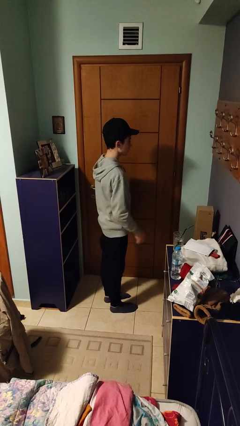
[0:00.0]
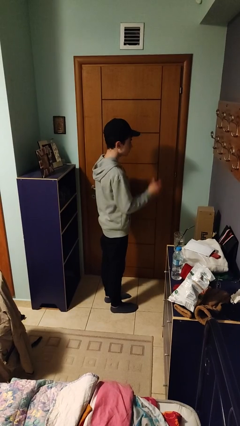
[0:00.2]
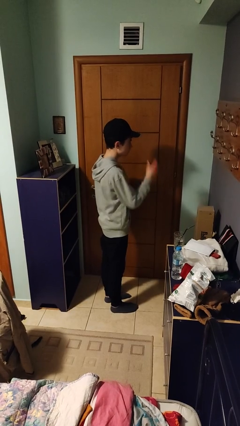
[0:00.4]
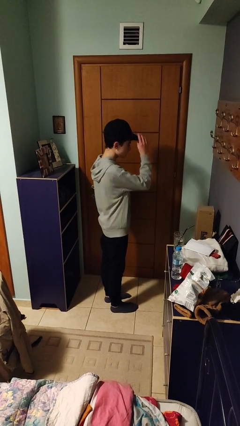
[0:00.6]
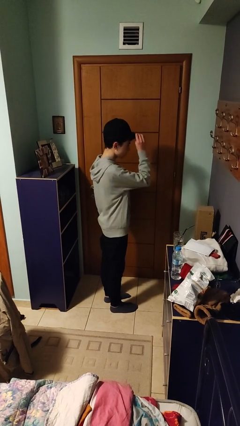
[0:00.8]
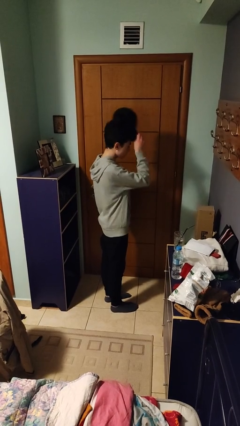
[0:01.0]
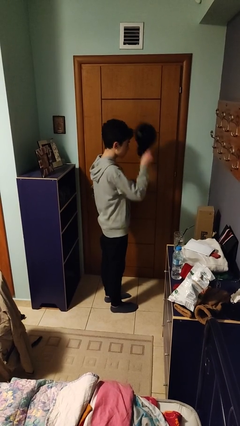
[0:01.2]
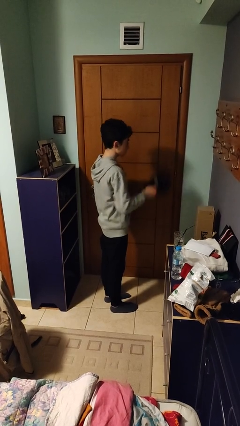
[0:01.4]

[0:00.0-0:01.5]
person takes off hat

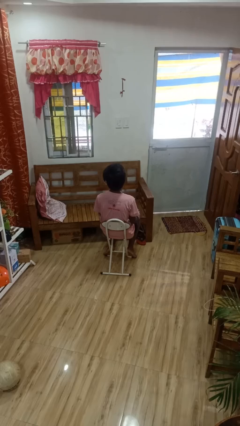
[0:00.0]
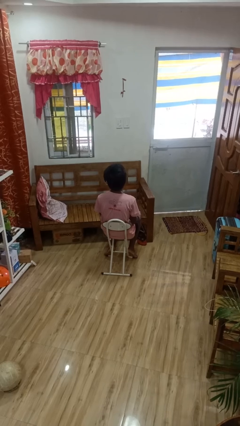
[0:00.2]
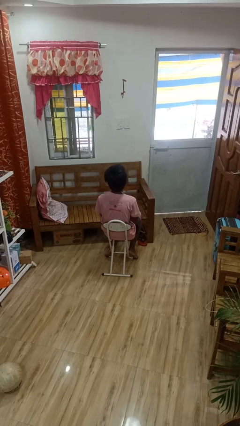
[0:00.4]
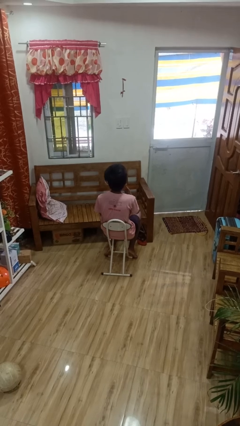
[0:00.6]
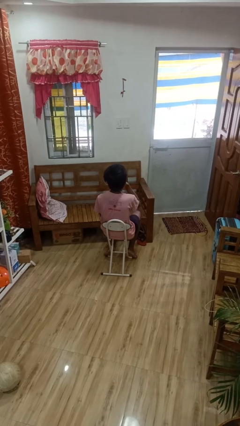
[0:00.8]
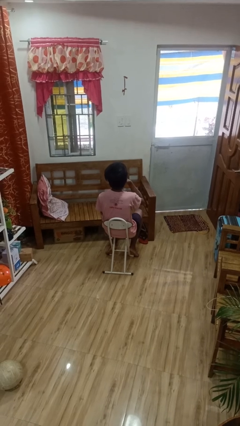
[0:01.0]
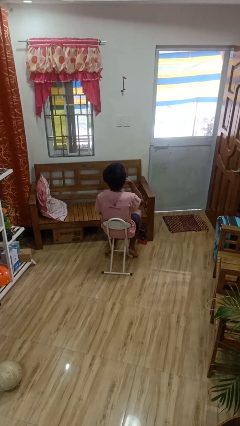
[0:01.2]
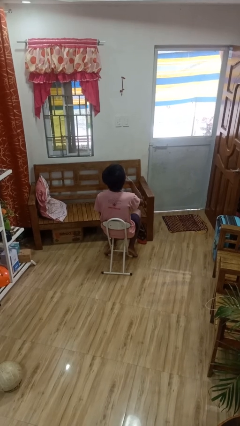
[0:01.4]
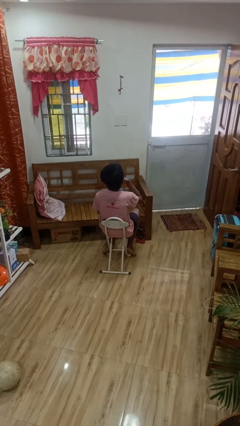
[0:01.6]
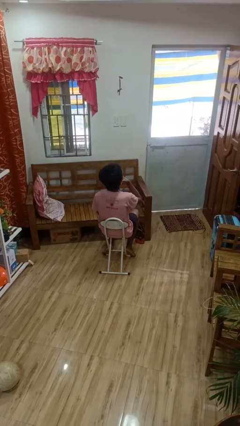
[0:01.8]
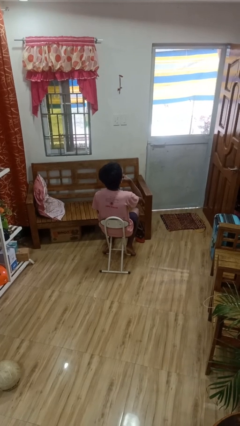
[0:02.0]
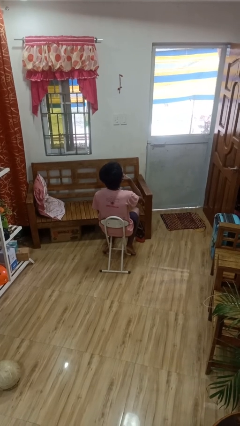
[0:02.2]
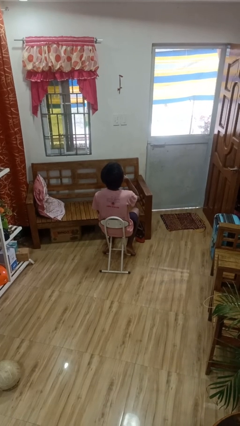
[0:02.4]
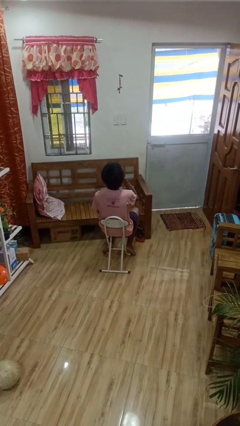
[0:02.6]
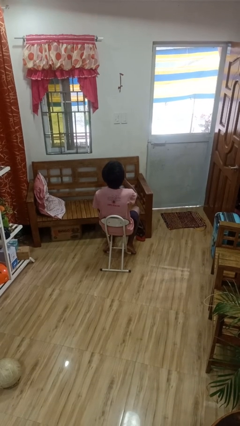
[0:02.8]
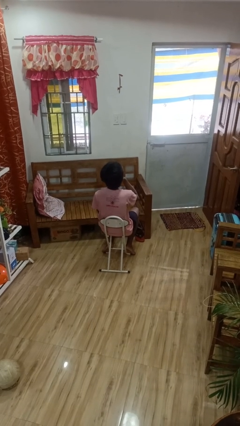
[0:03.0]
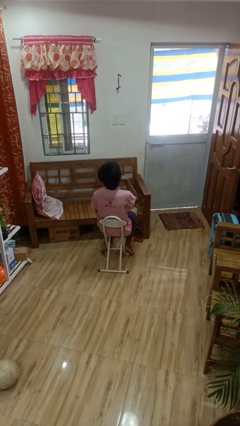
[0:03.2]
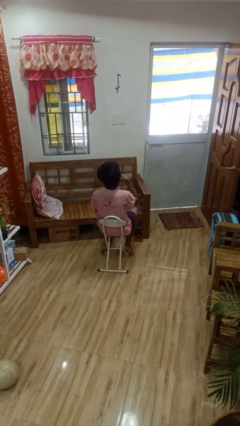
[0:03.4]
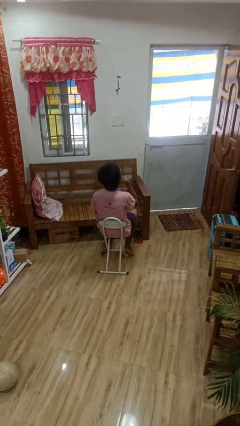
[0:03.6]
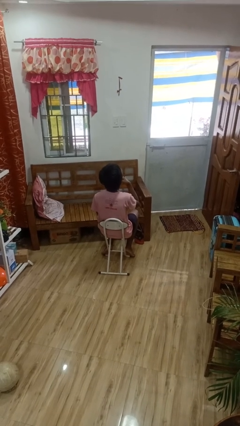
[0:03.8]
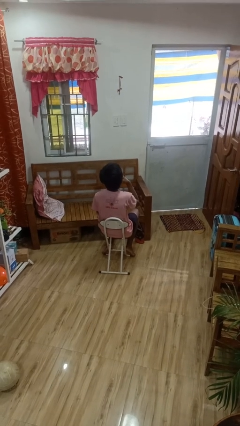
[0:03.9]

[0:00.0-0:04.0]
person strokes chin

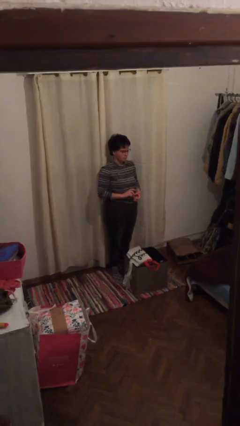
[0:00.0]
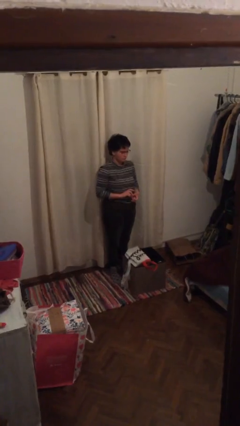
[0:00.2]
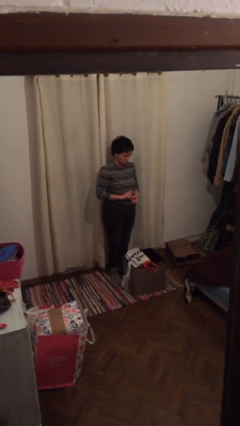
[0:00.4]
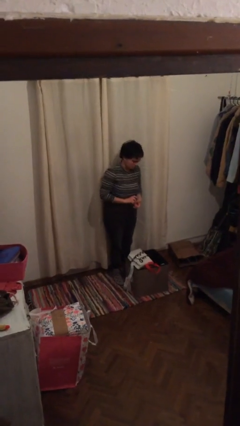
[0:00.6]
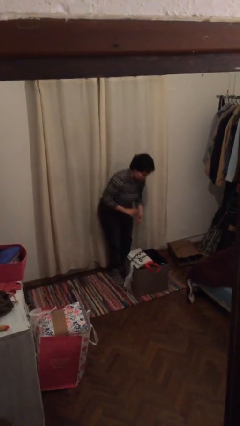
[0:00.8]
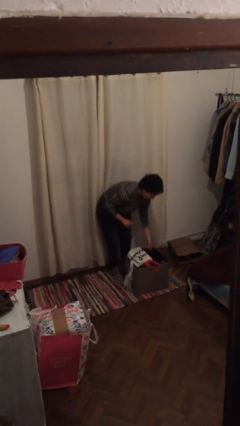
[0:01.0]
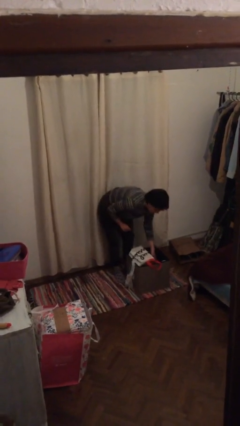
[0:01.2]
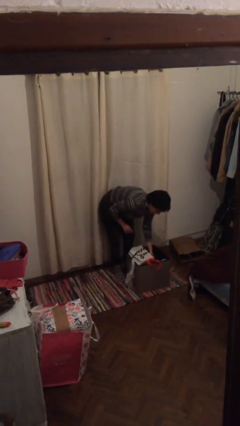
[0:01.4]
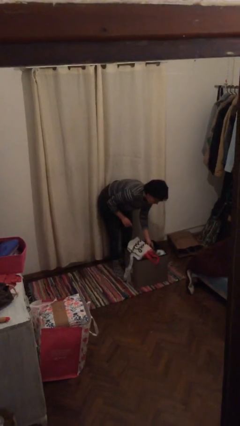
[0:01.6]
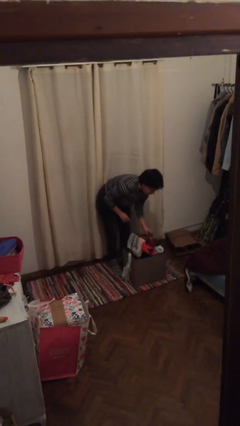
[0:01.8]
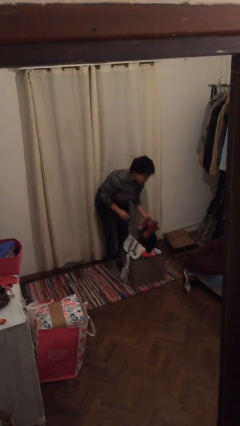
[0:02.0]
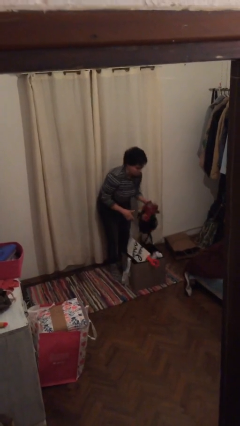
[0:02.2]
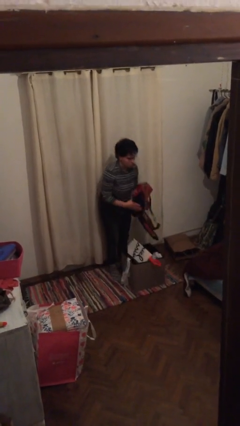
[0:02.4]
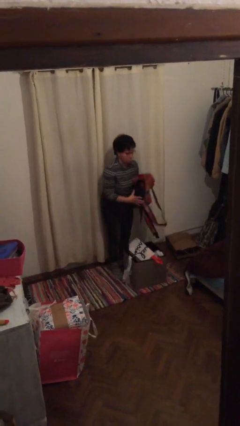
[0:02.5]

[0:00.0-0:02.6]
person takes object from basket

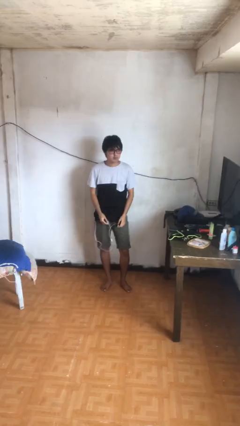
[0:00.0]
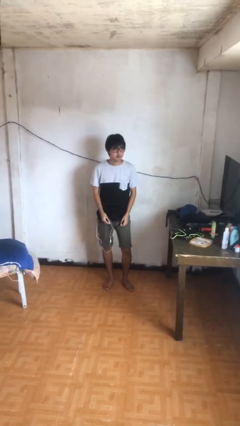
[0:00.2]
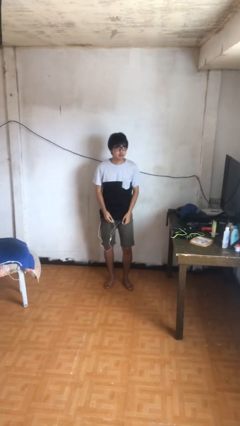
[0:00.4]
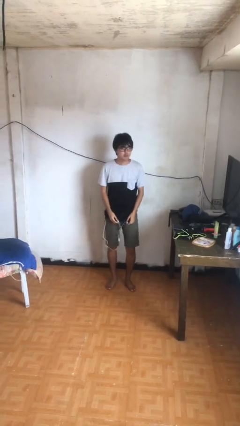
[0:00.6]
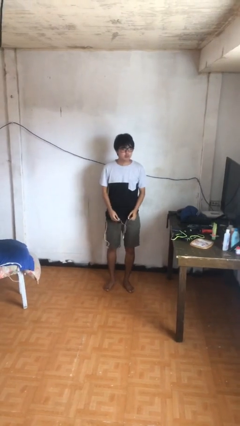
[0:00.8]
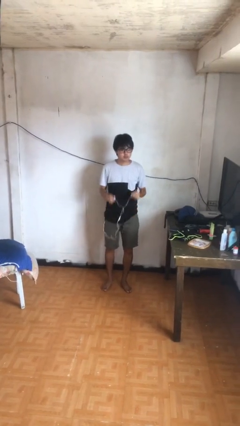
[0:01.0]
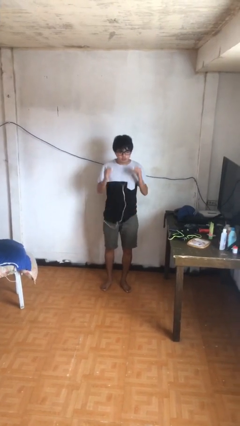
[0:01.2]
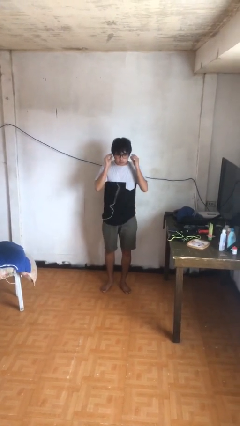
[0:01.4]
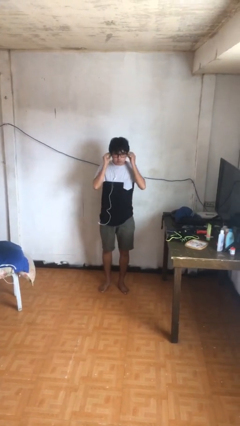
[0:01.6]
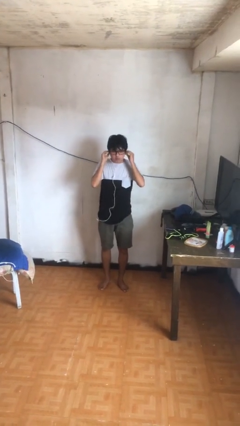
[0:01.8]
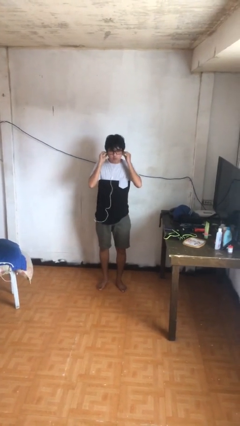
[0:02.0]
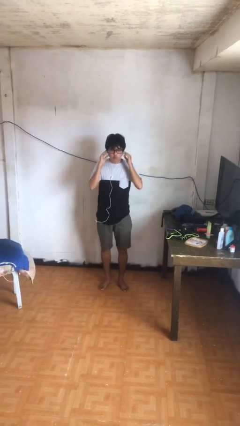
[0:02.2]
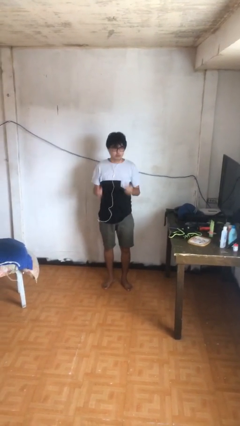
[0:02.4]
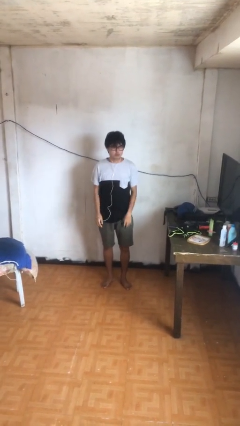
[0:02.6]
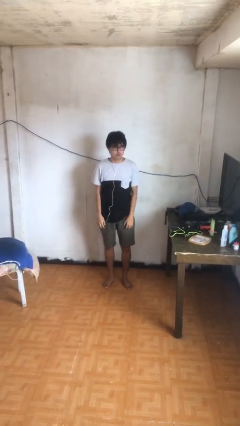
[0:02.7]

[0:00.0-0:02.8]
person puts on headphones

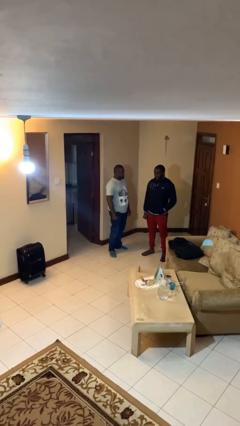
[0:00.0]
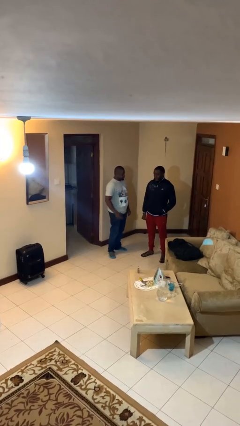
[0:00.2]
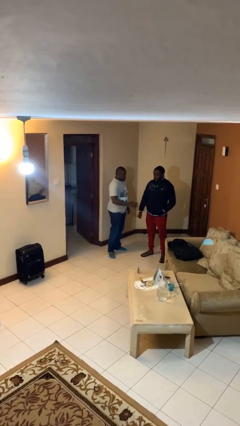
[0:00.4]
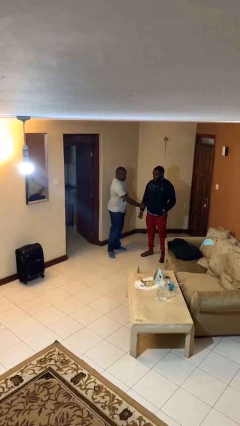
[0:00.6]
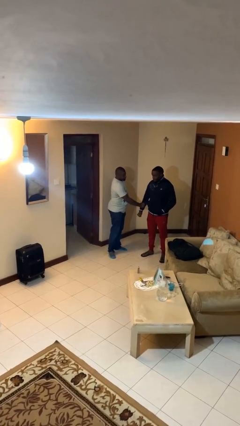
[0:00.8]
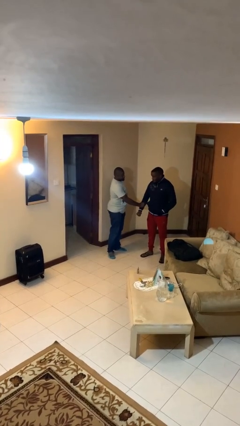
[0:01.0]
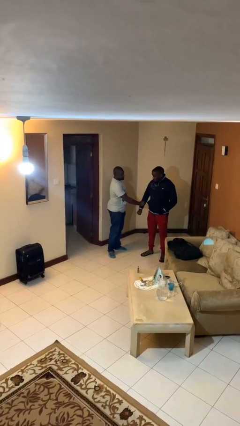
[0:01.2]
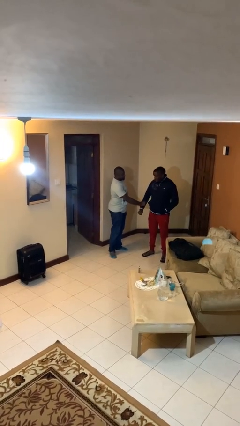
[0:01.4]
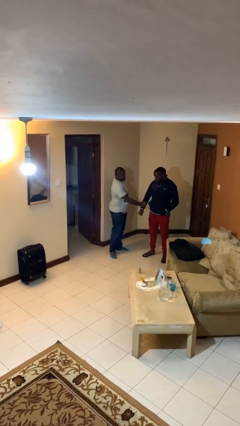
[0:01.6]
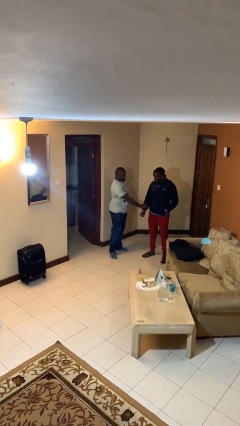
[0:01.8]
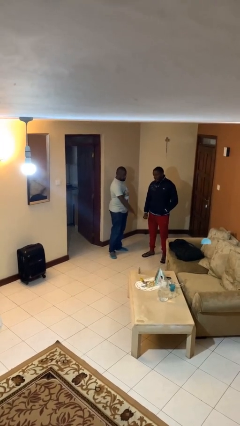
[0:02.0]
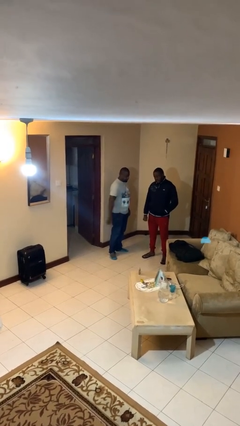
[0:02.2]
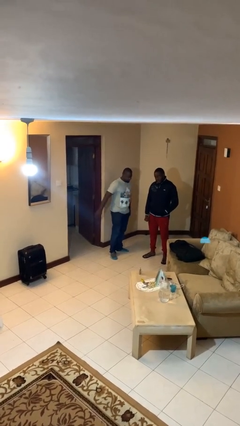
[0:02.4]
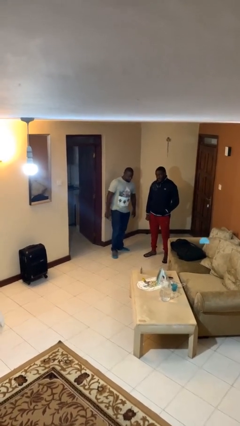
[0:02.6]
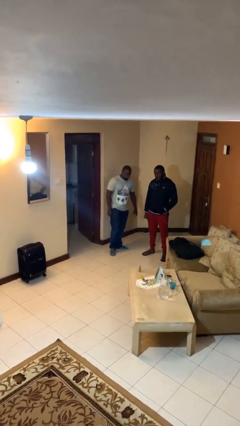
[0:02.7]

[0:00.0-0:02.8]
person grabs person by forearm

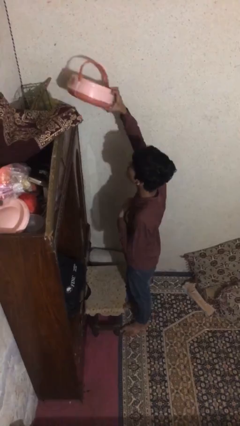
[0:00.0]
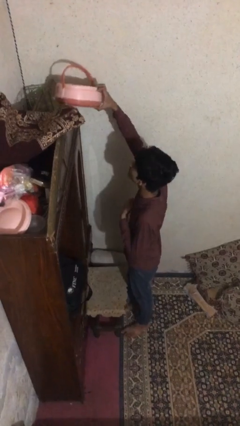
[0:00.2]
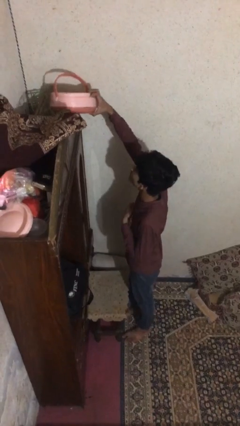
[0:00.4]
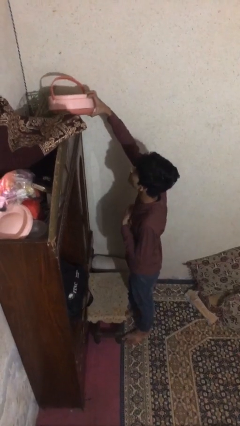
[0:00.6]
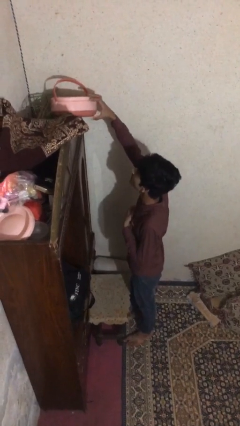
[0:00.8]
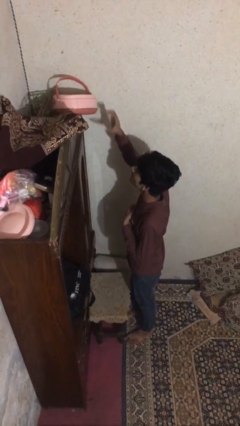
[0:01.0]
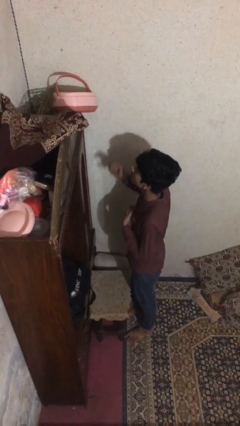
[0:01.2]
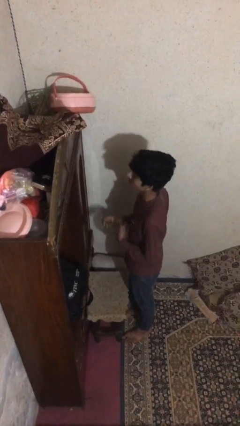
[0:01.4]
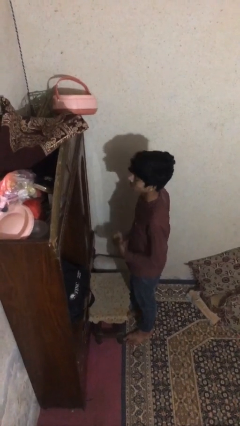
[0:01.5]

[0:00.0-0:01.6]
person puts down object on shelf

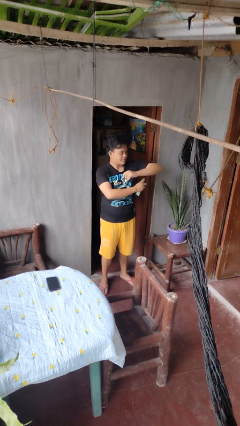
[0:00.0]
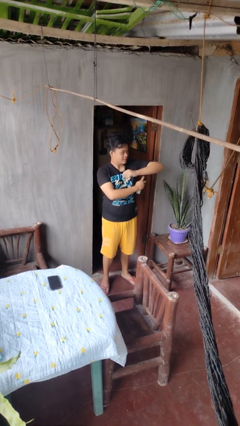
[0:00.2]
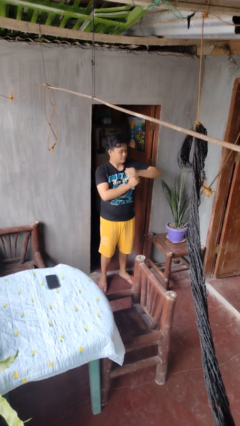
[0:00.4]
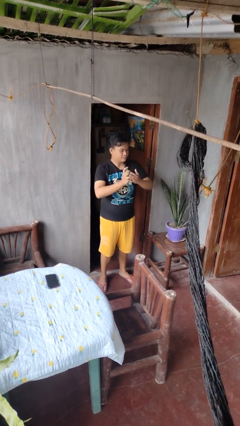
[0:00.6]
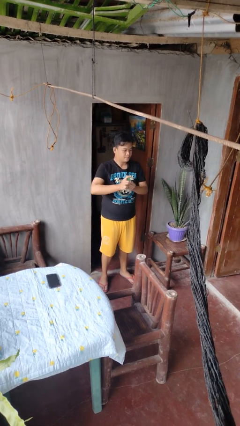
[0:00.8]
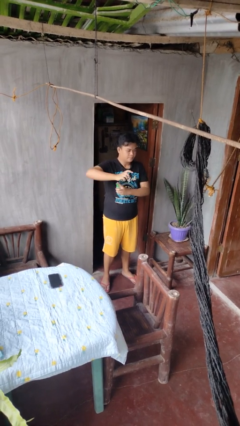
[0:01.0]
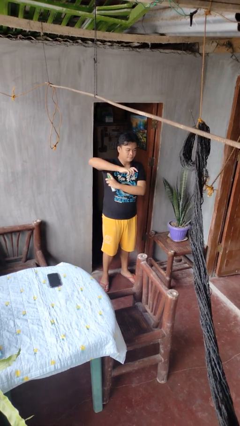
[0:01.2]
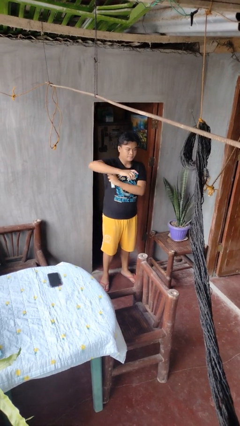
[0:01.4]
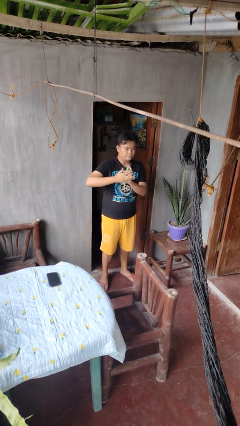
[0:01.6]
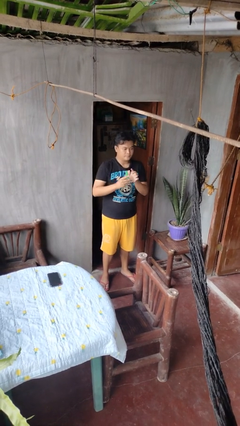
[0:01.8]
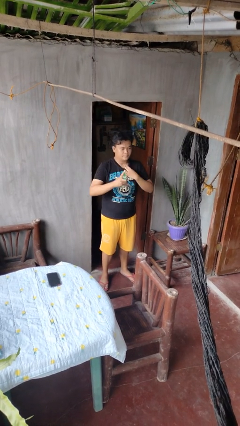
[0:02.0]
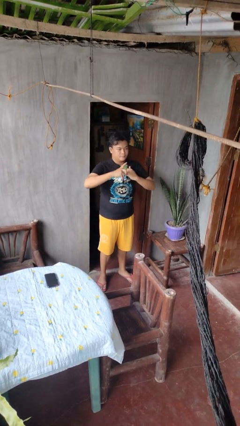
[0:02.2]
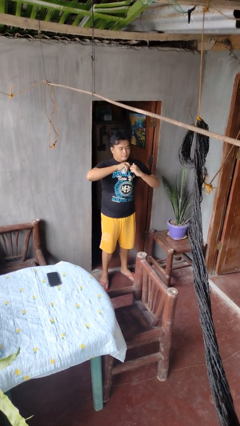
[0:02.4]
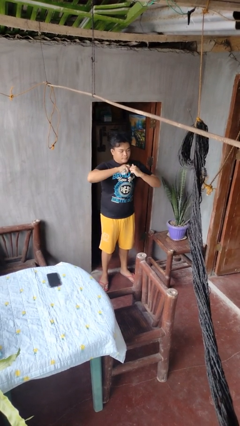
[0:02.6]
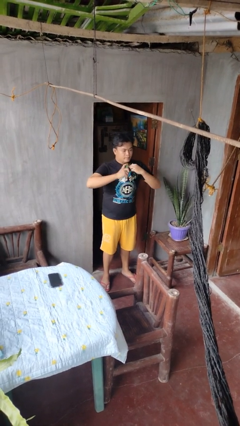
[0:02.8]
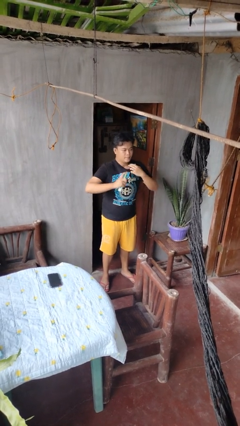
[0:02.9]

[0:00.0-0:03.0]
person applies deodorant
